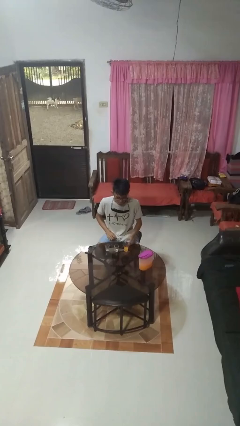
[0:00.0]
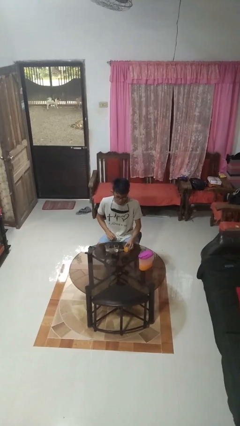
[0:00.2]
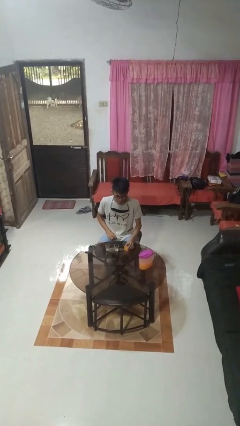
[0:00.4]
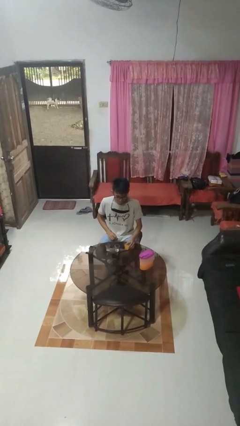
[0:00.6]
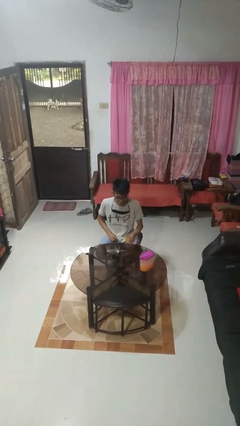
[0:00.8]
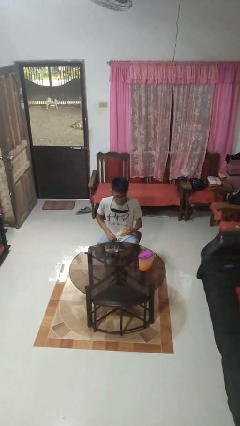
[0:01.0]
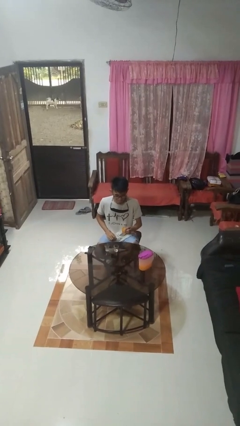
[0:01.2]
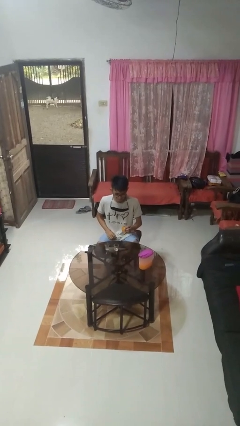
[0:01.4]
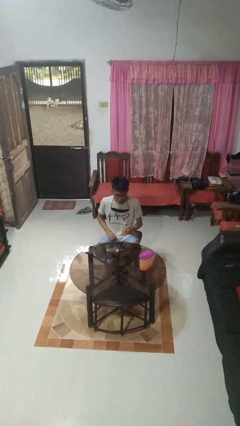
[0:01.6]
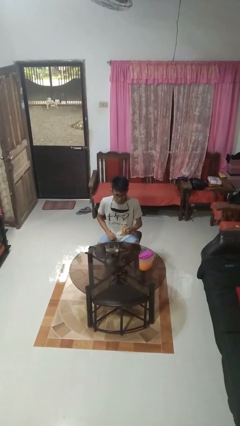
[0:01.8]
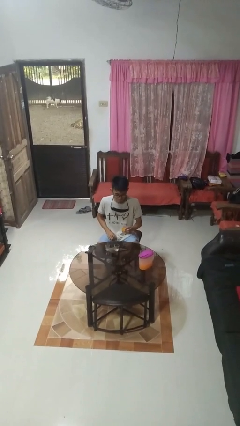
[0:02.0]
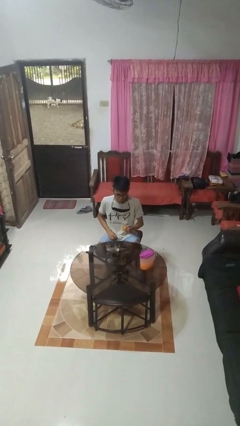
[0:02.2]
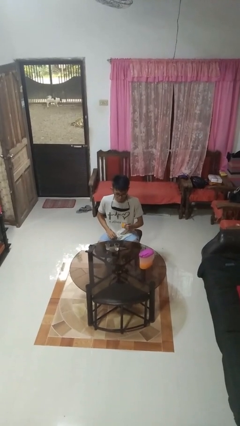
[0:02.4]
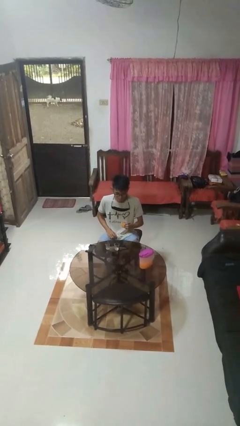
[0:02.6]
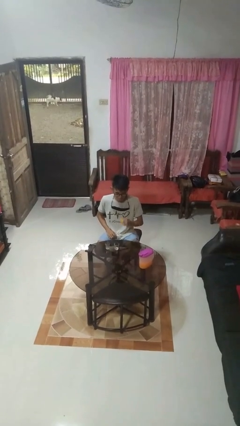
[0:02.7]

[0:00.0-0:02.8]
person picks up object from table

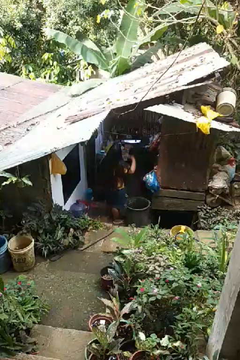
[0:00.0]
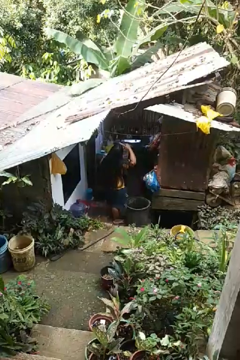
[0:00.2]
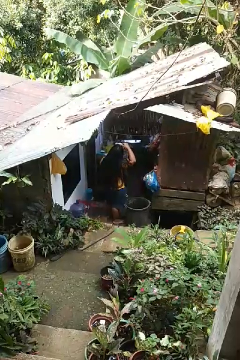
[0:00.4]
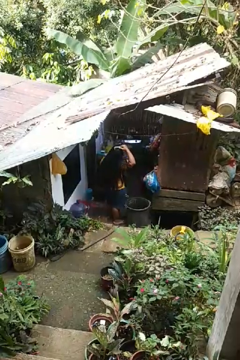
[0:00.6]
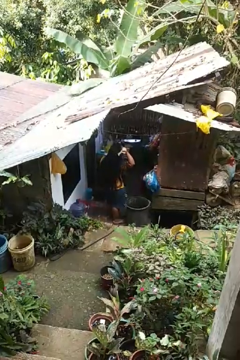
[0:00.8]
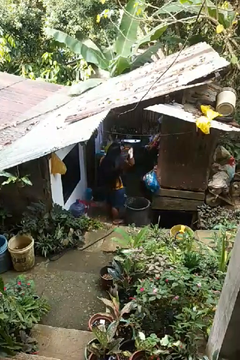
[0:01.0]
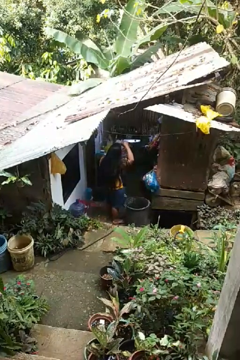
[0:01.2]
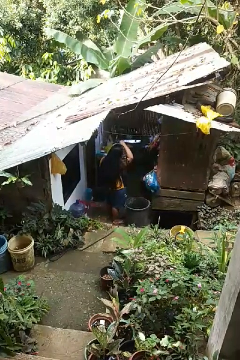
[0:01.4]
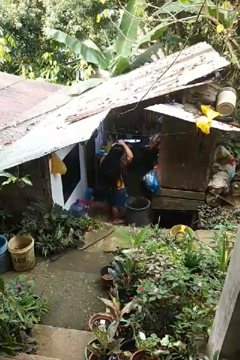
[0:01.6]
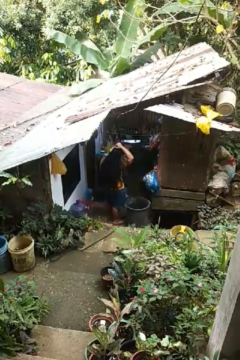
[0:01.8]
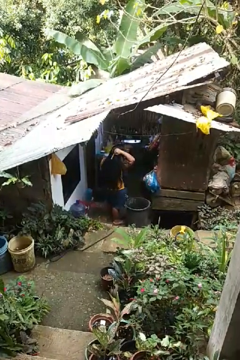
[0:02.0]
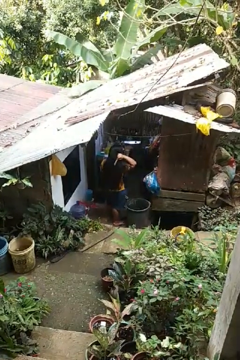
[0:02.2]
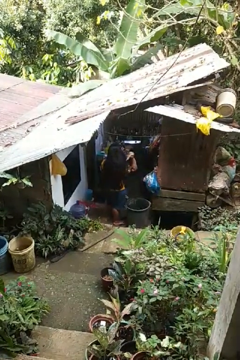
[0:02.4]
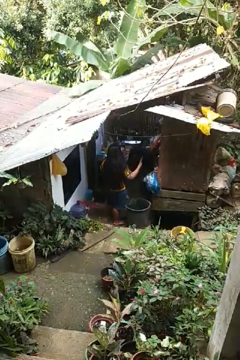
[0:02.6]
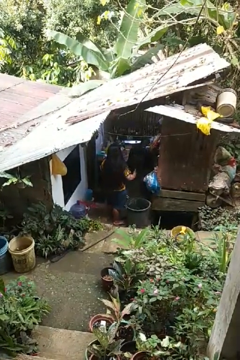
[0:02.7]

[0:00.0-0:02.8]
person brushes hair

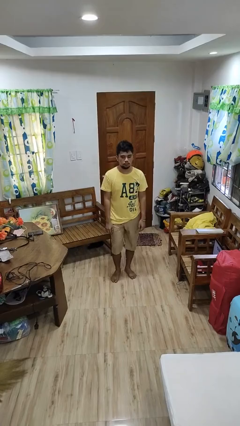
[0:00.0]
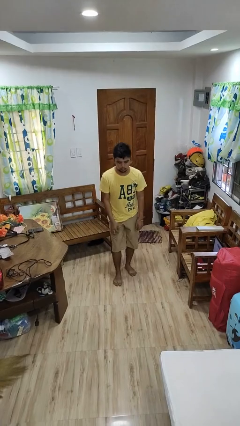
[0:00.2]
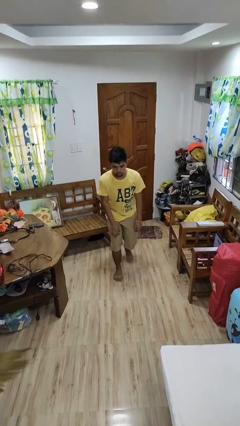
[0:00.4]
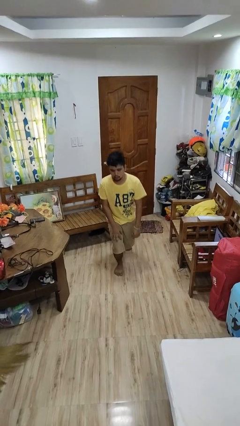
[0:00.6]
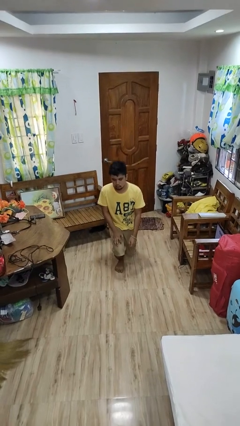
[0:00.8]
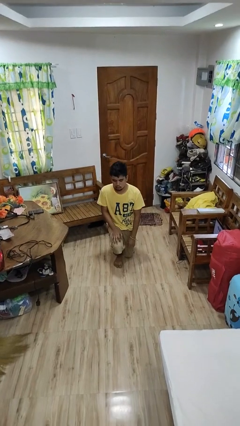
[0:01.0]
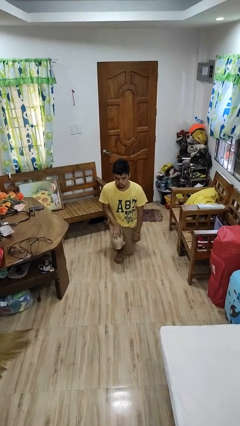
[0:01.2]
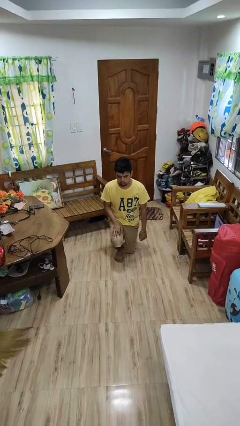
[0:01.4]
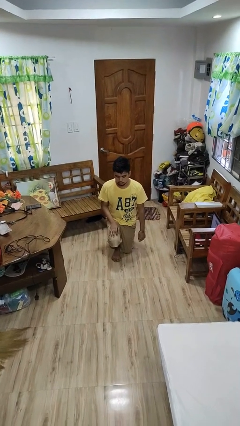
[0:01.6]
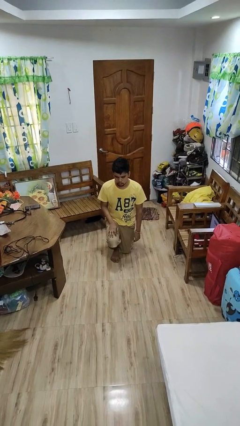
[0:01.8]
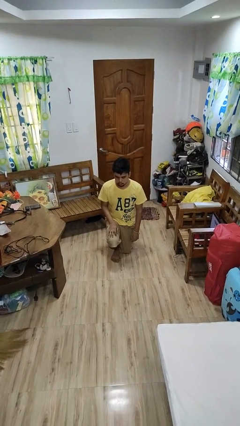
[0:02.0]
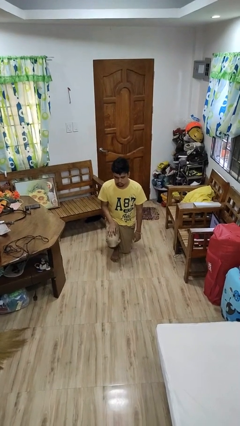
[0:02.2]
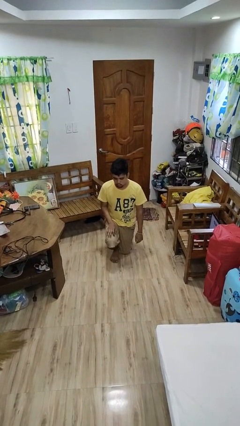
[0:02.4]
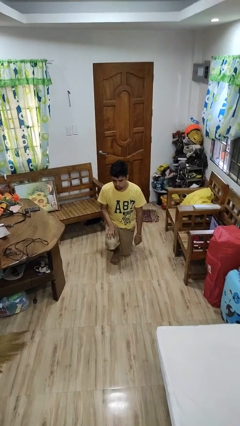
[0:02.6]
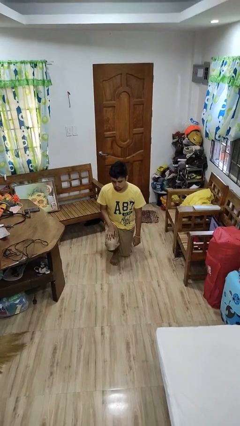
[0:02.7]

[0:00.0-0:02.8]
person kneels

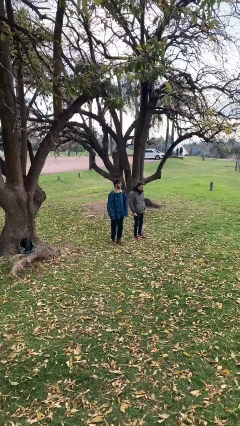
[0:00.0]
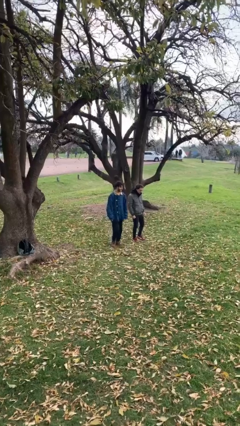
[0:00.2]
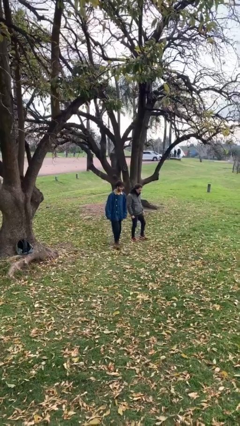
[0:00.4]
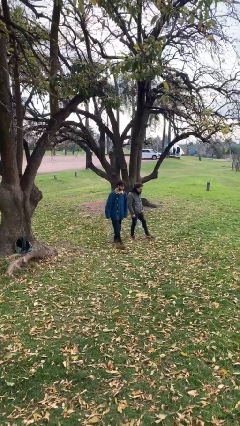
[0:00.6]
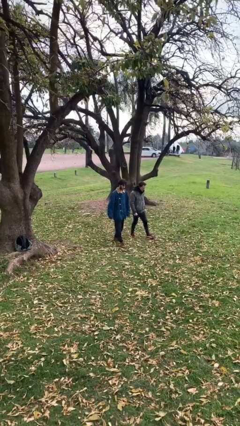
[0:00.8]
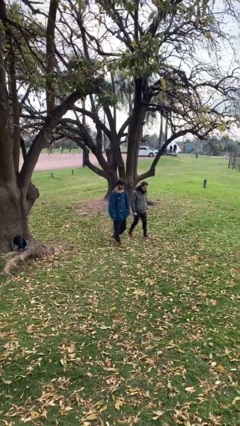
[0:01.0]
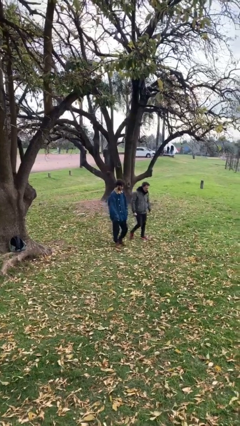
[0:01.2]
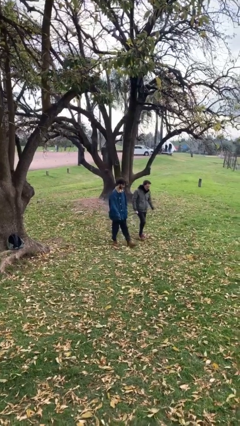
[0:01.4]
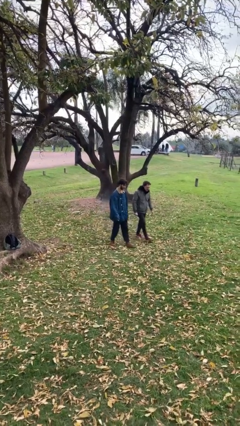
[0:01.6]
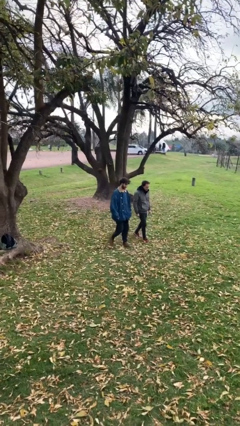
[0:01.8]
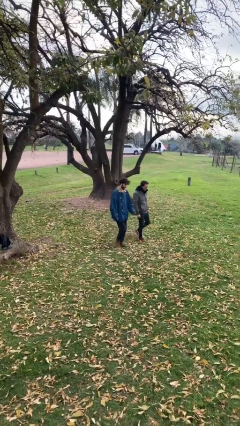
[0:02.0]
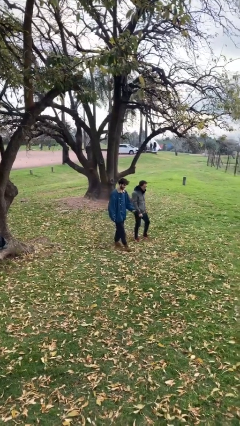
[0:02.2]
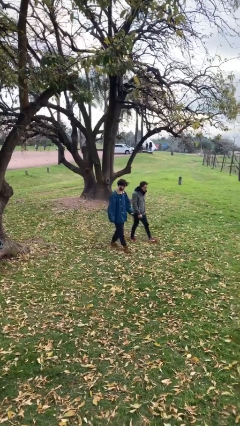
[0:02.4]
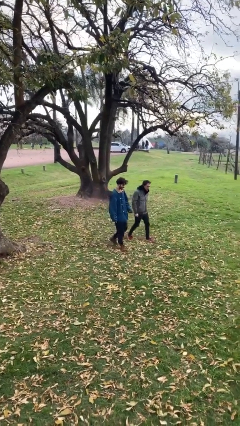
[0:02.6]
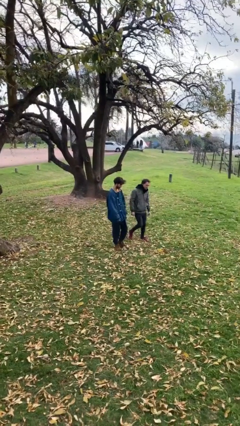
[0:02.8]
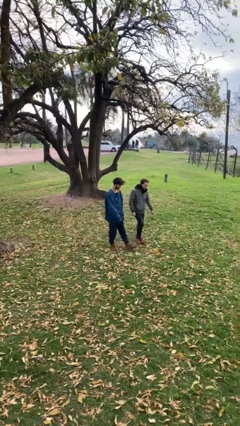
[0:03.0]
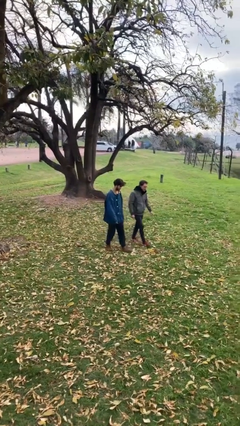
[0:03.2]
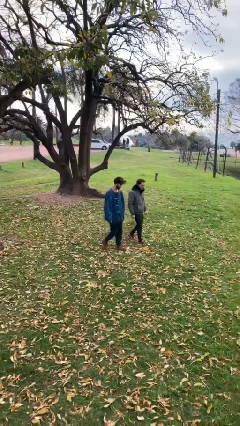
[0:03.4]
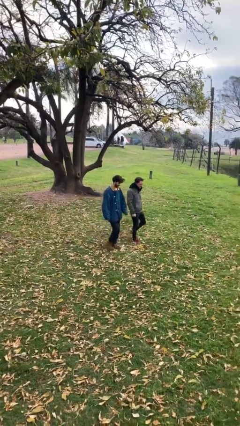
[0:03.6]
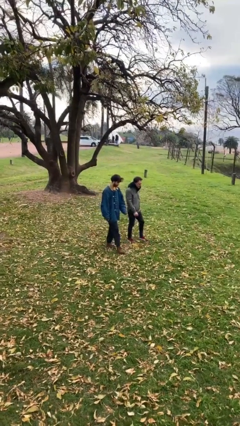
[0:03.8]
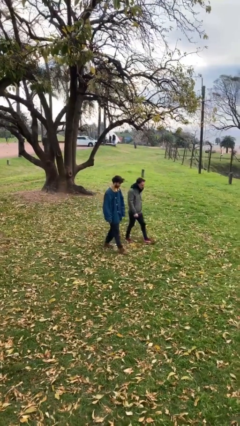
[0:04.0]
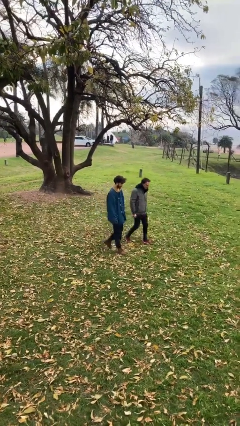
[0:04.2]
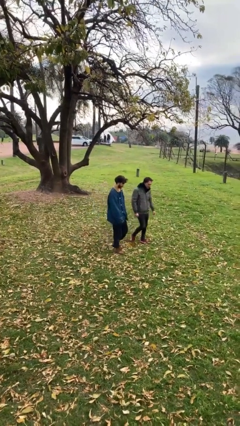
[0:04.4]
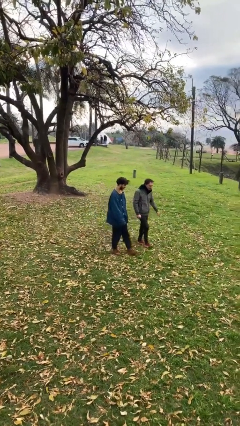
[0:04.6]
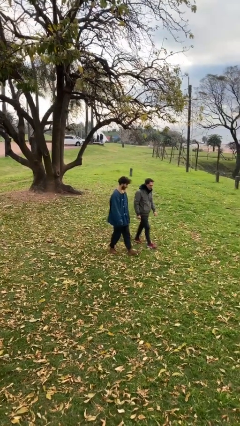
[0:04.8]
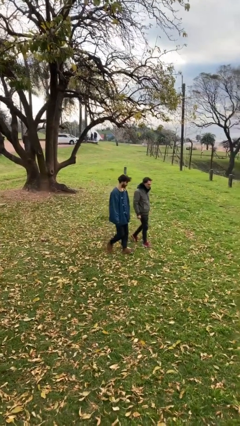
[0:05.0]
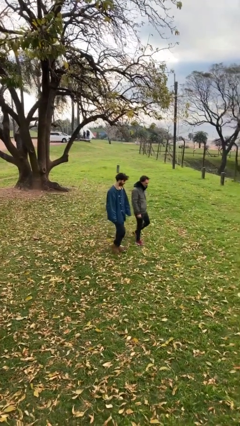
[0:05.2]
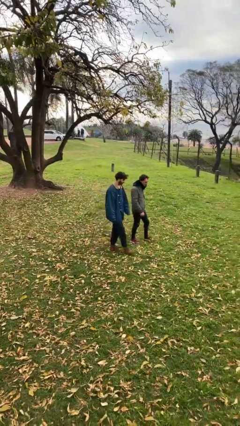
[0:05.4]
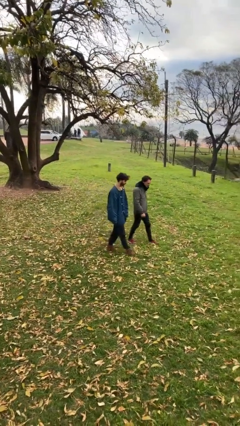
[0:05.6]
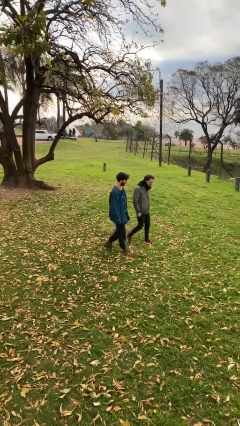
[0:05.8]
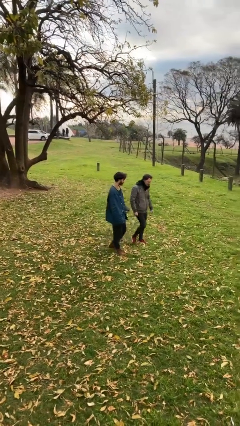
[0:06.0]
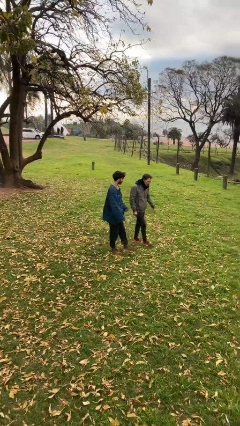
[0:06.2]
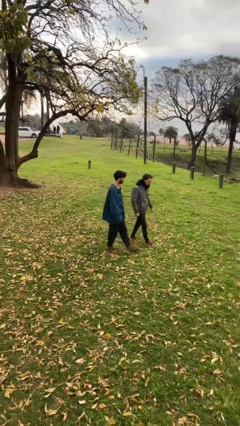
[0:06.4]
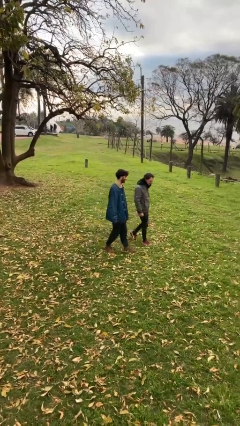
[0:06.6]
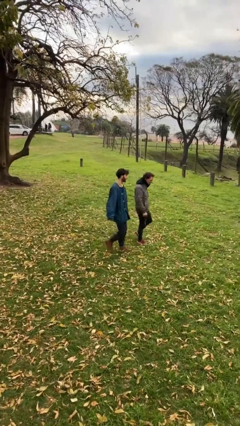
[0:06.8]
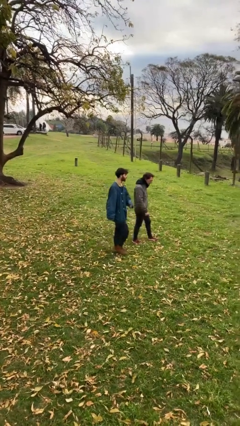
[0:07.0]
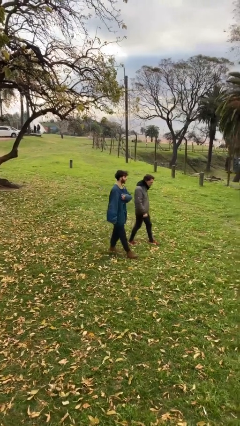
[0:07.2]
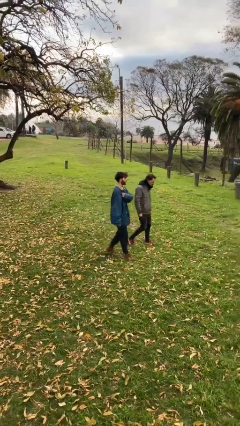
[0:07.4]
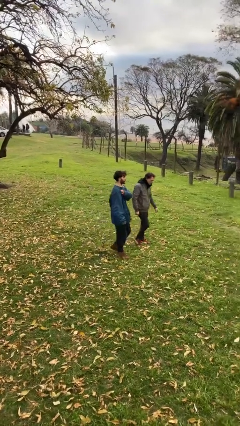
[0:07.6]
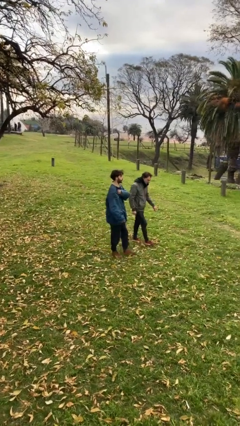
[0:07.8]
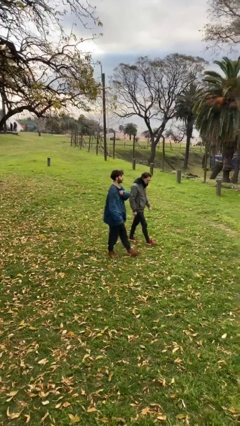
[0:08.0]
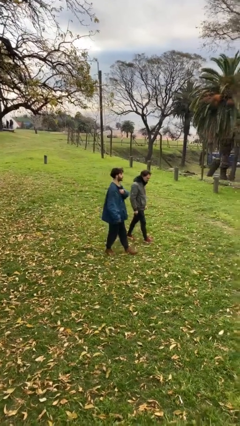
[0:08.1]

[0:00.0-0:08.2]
person talks to person

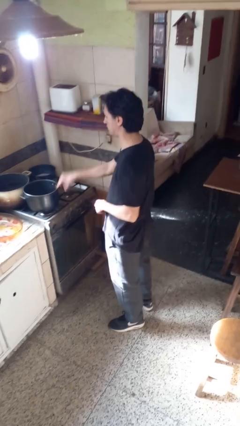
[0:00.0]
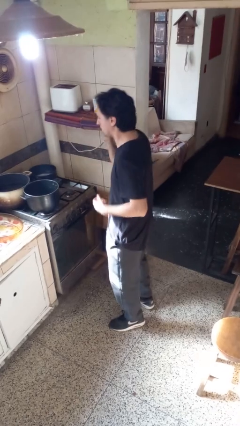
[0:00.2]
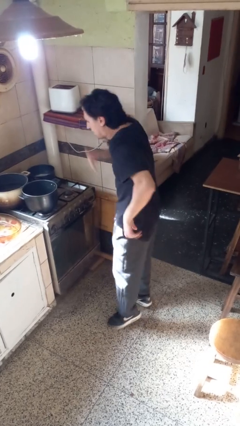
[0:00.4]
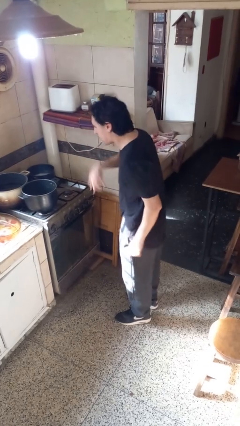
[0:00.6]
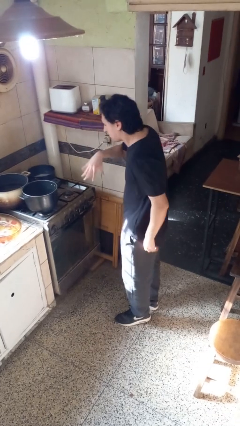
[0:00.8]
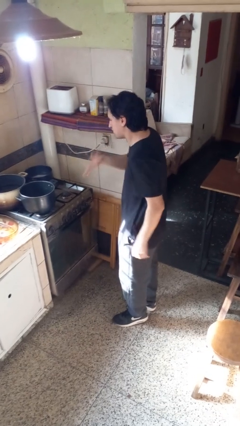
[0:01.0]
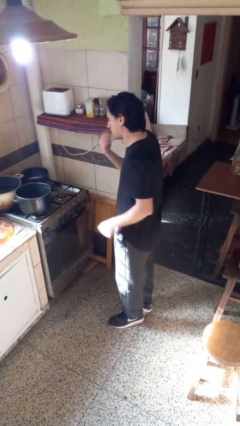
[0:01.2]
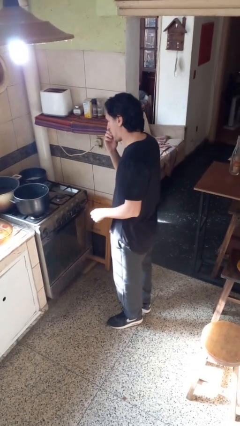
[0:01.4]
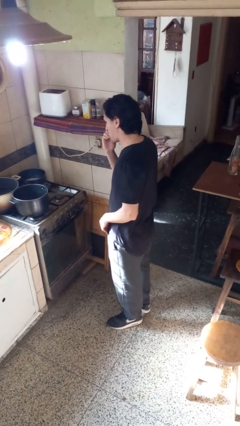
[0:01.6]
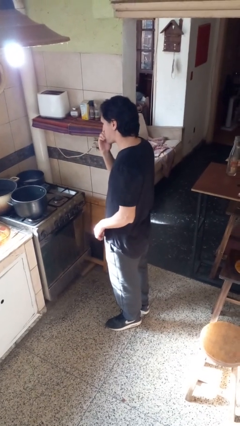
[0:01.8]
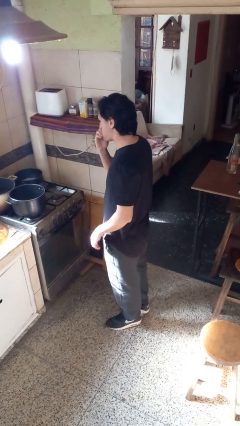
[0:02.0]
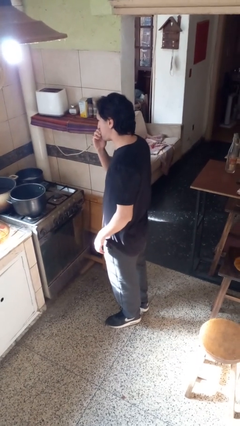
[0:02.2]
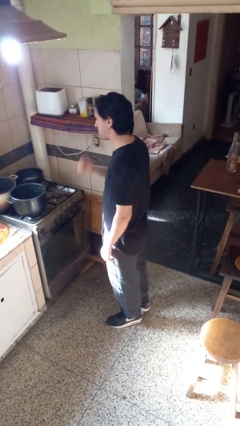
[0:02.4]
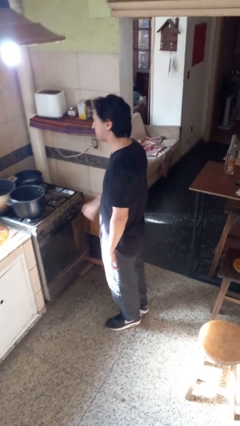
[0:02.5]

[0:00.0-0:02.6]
person burns hand
